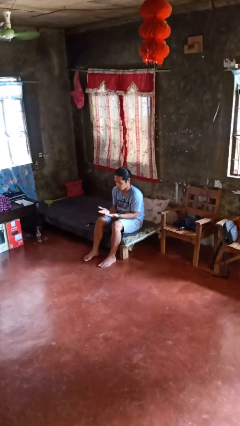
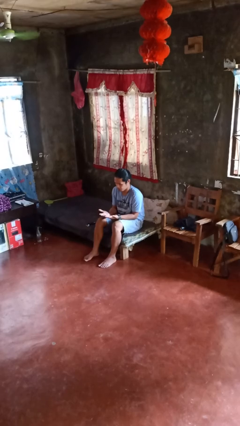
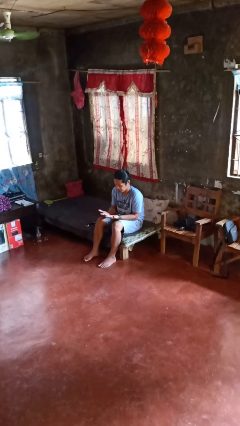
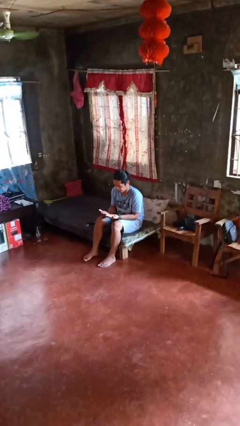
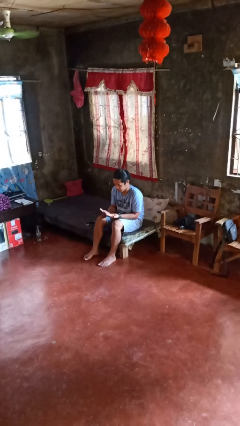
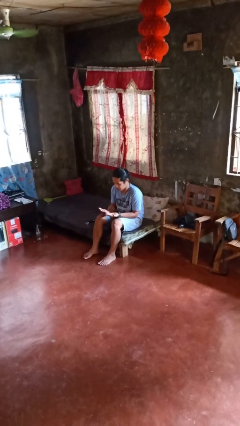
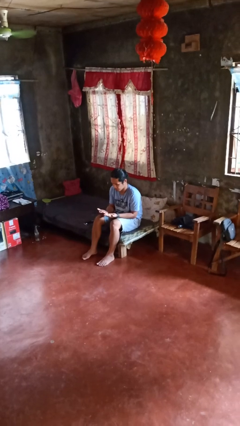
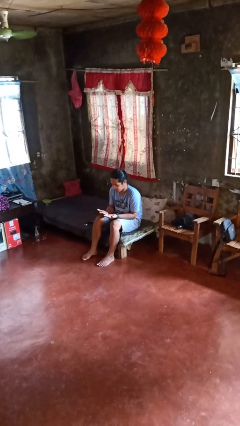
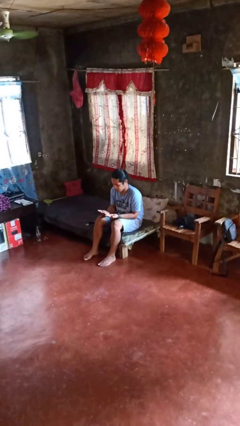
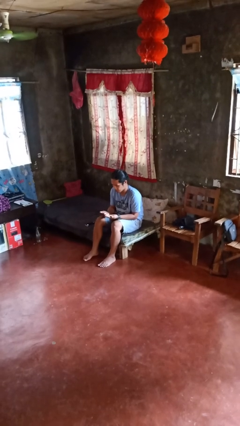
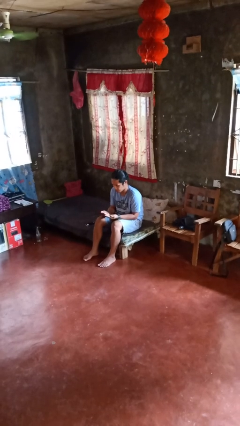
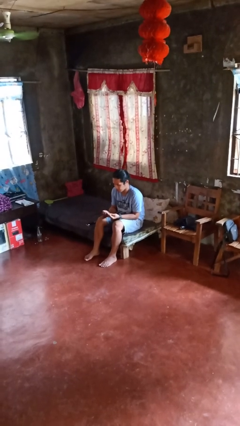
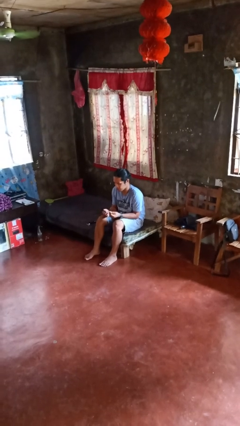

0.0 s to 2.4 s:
person looks at hands in lap

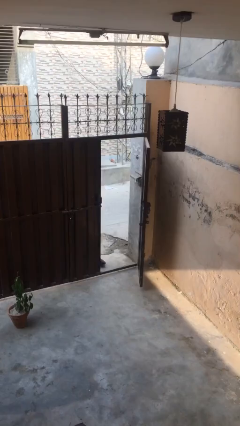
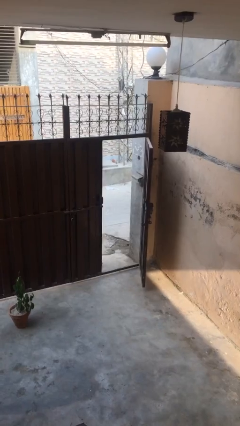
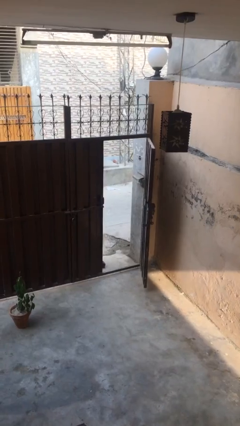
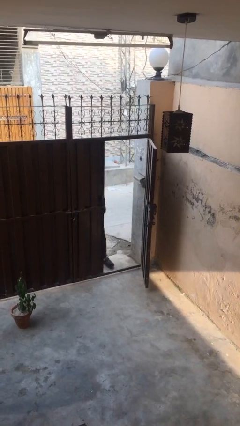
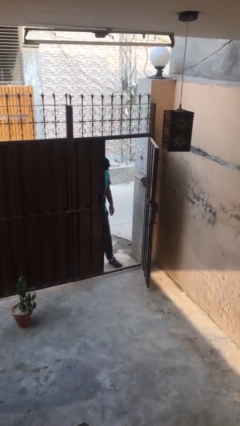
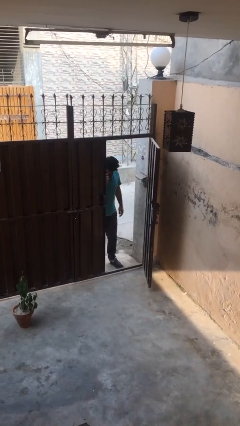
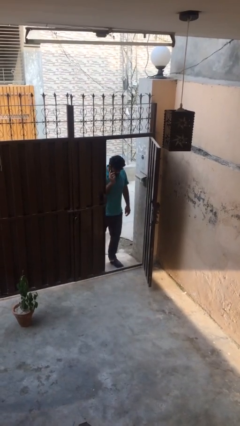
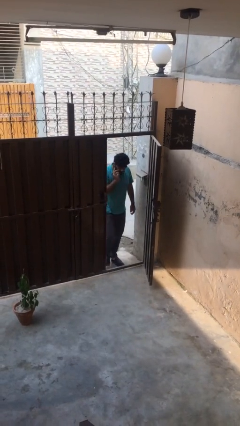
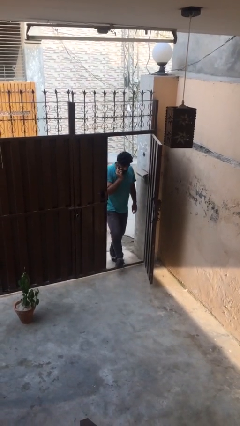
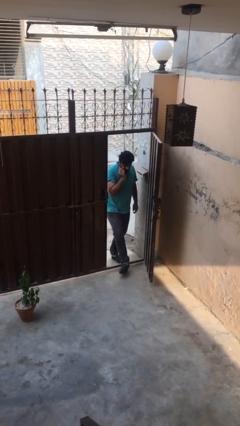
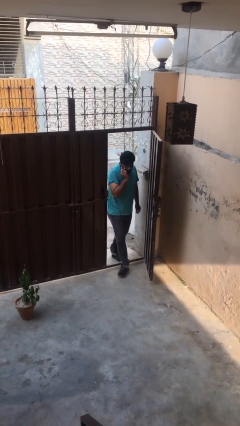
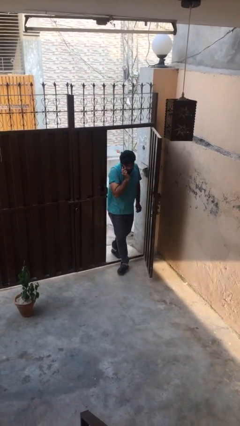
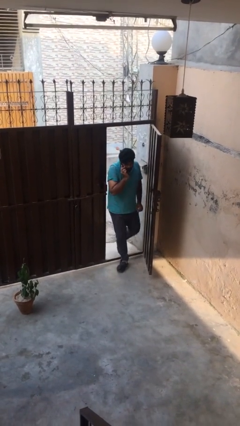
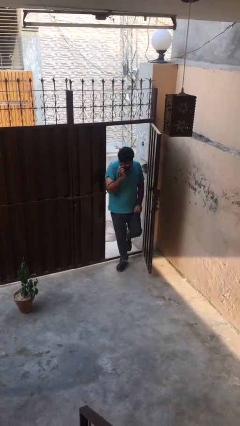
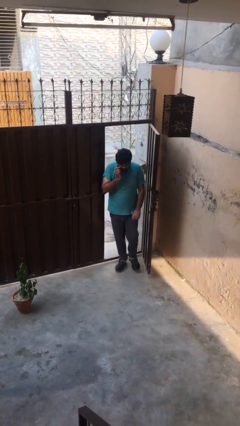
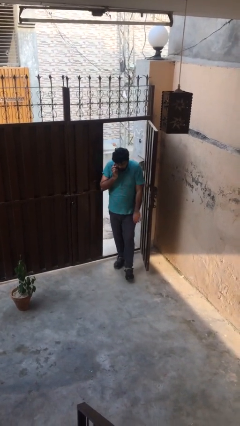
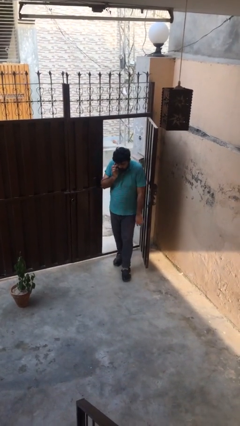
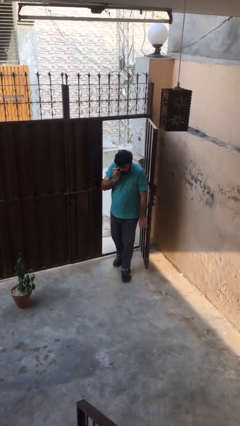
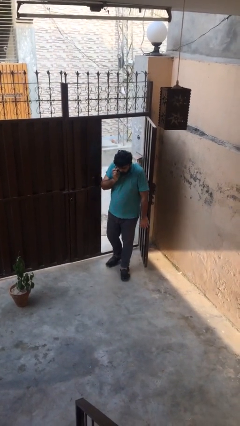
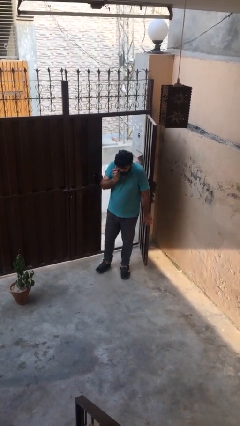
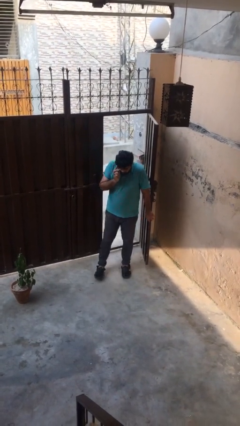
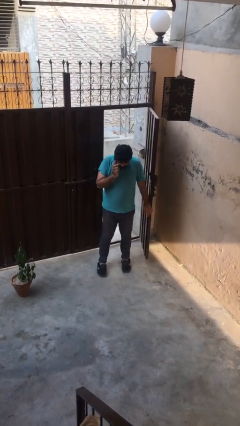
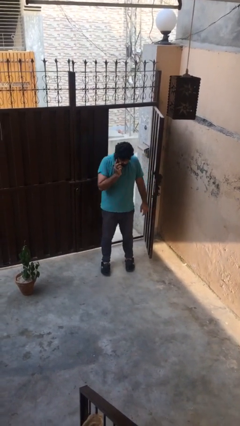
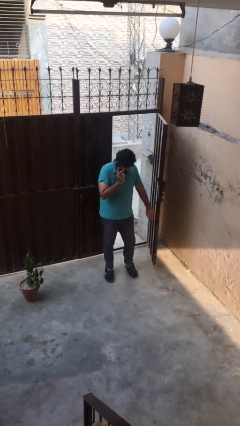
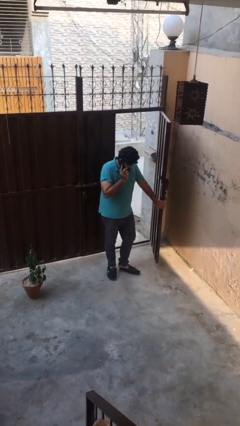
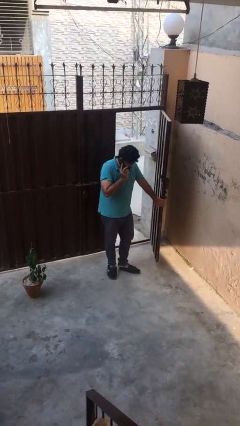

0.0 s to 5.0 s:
person enters scene through structure

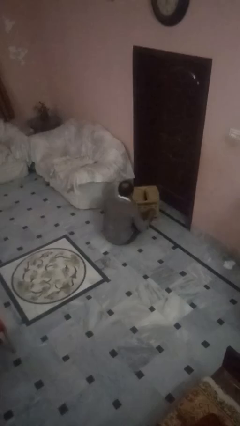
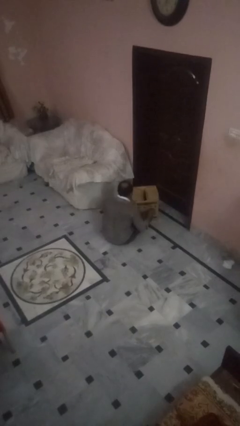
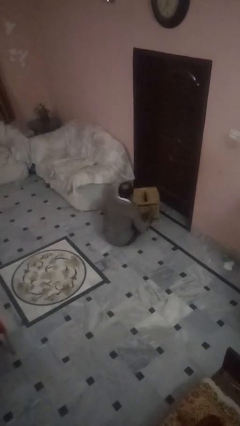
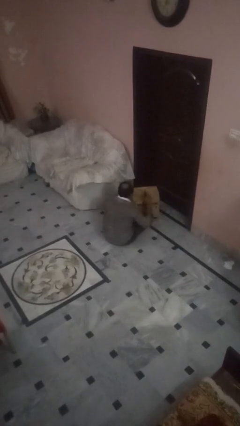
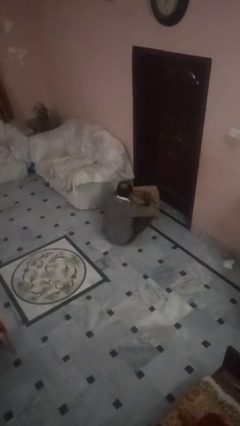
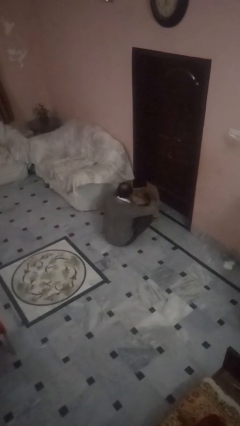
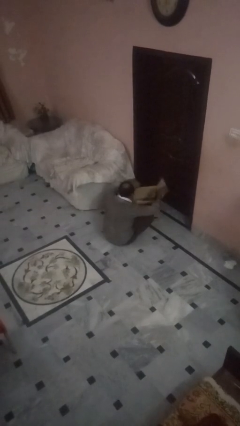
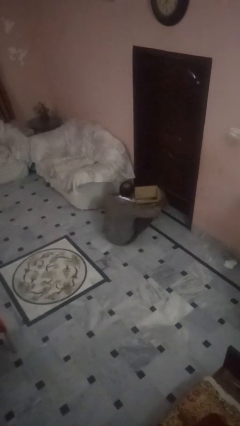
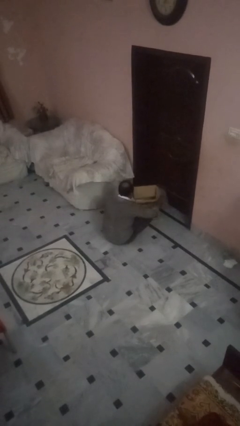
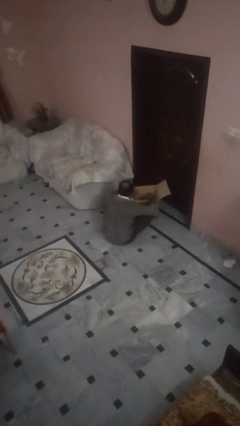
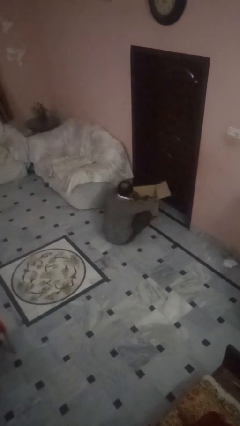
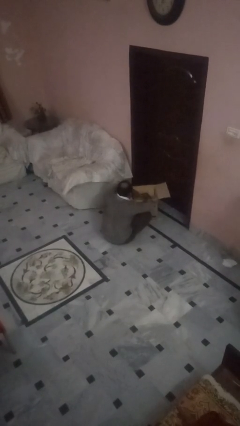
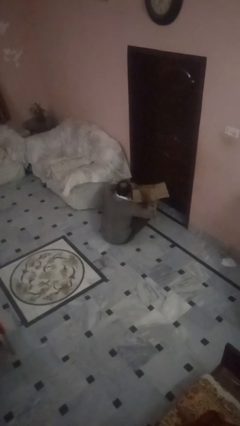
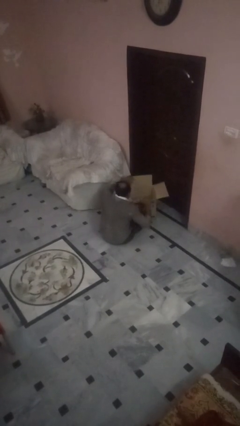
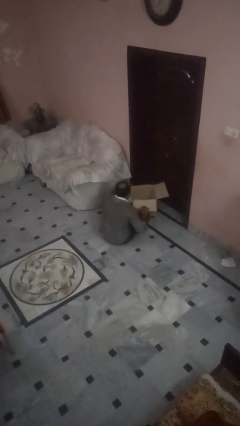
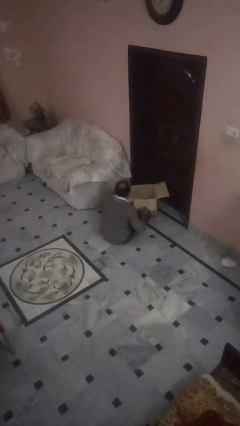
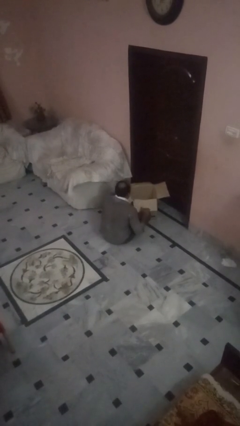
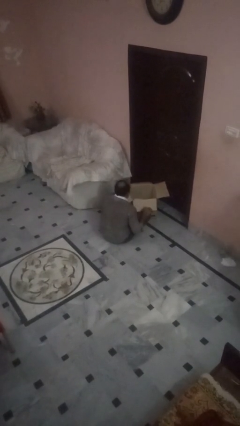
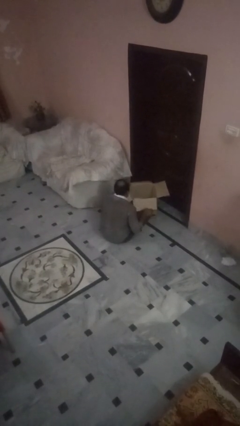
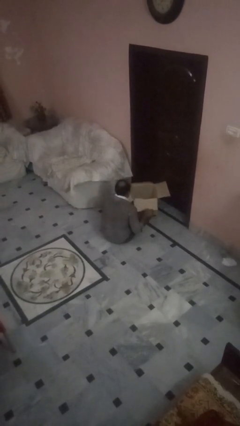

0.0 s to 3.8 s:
person opens box

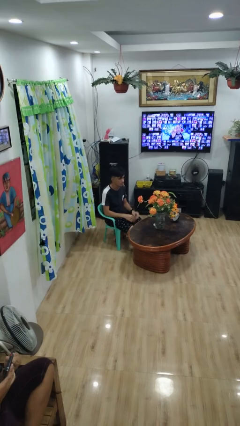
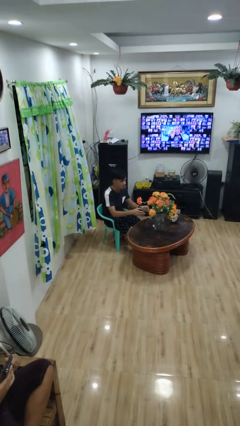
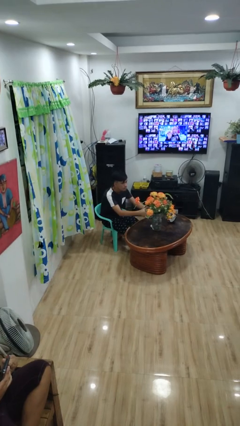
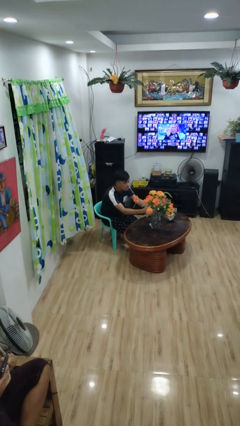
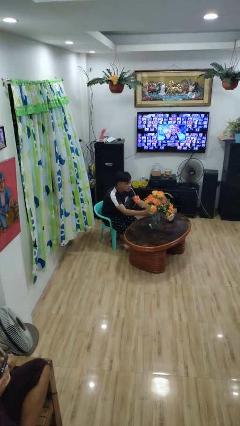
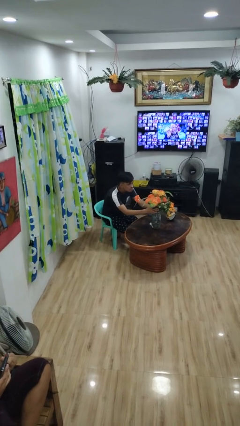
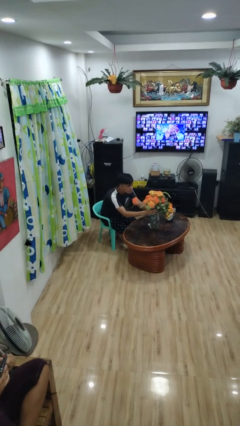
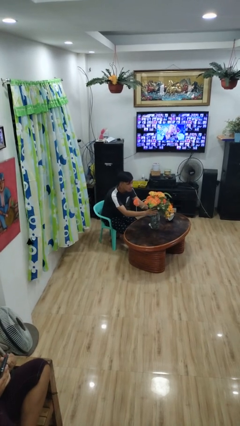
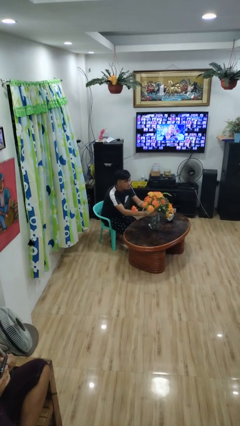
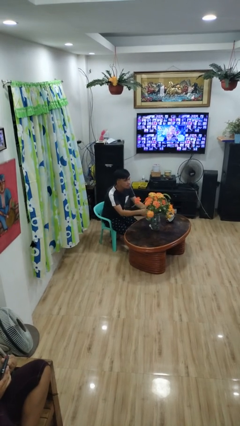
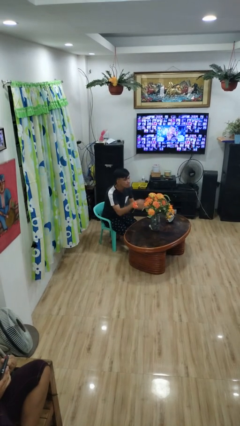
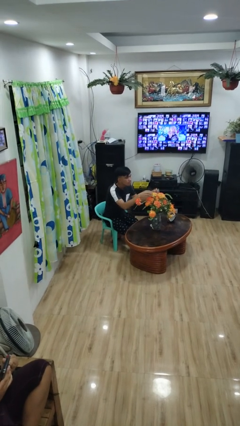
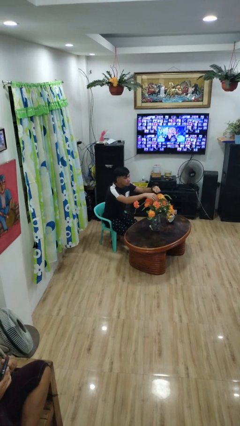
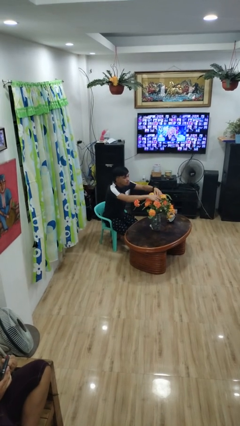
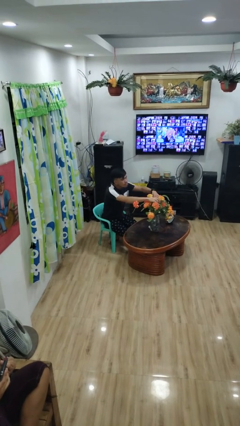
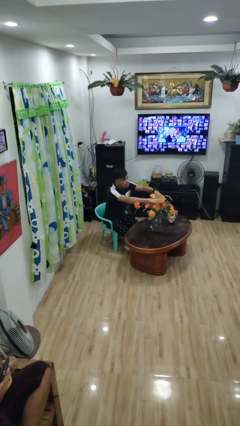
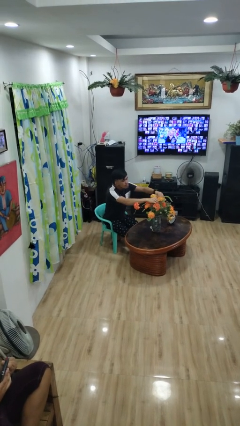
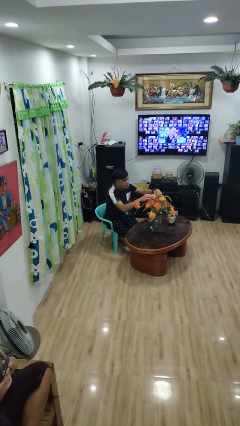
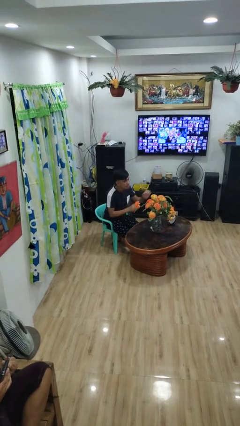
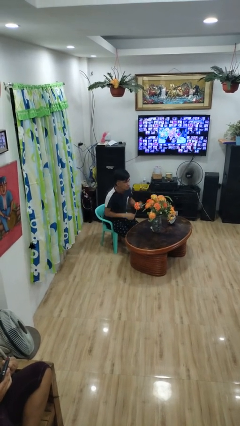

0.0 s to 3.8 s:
person arranges flowers in vase

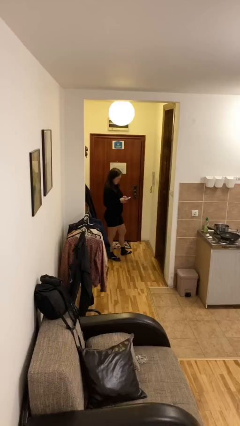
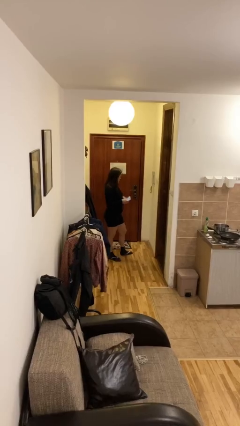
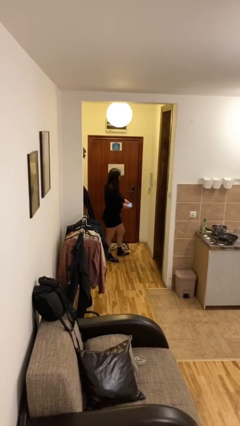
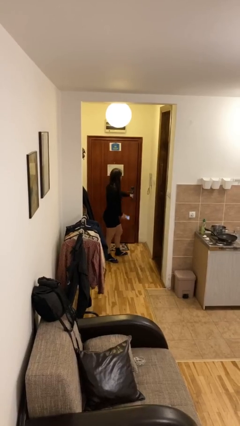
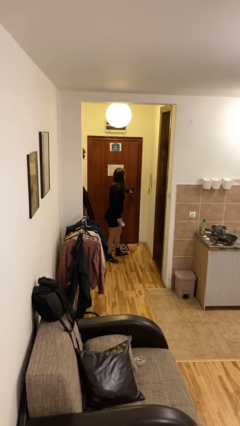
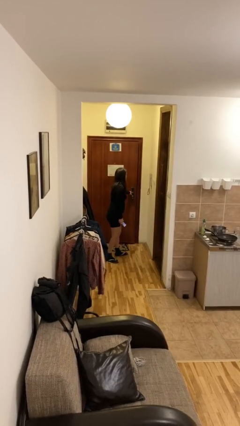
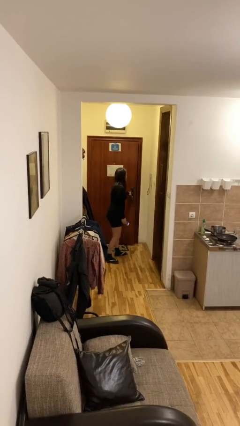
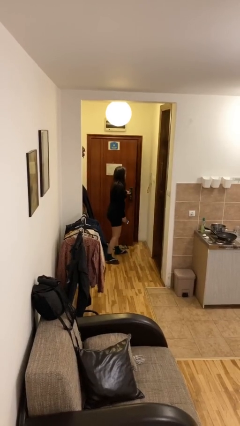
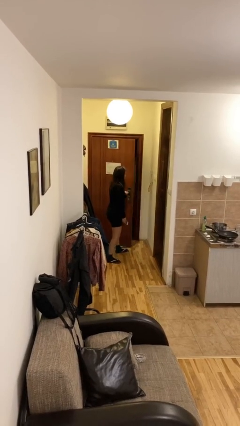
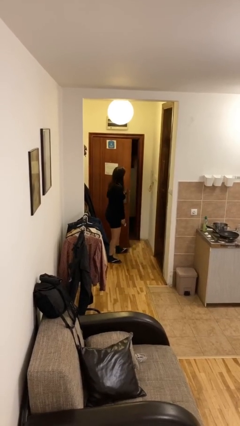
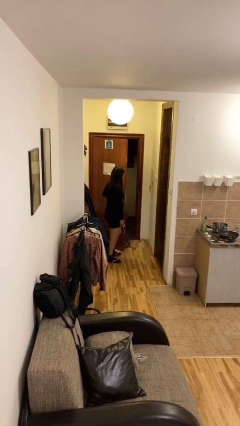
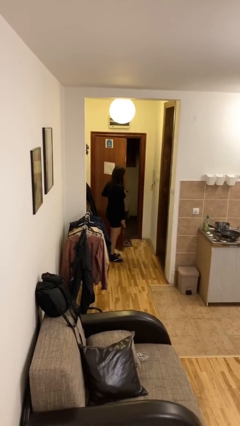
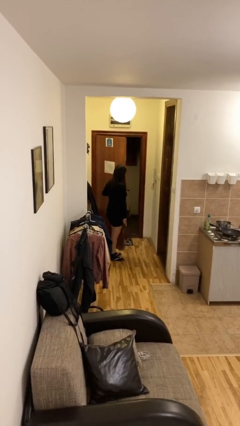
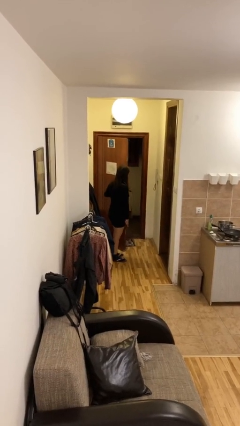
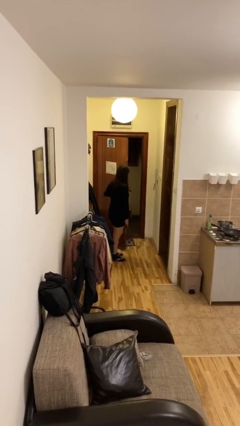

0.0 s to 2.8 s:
person opens facility door
